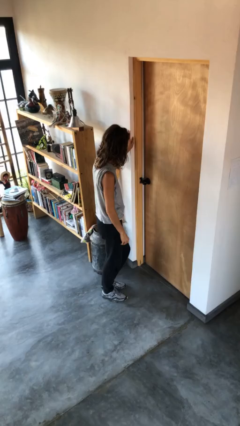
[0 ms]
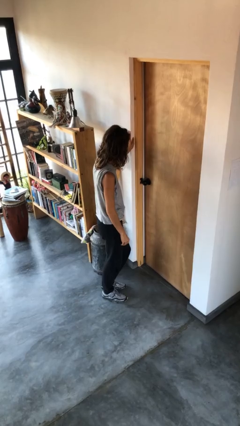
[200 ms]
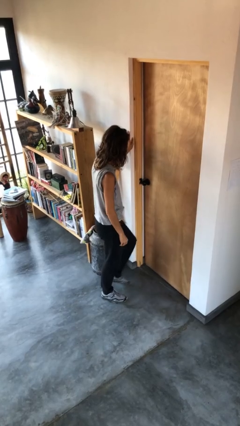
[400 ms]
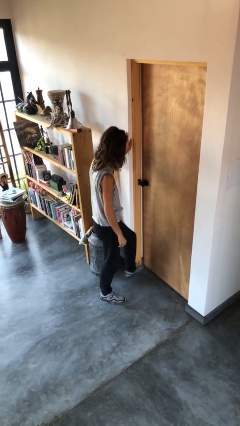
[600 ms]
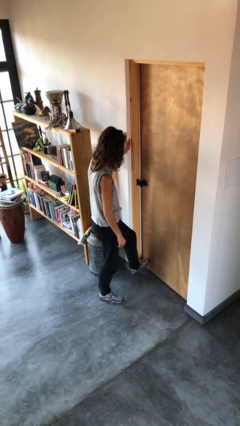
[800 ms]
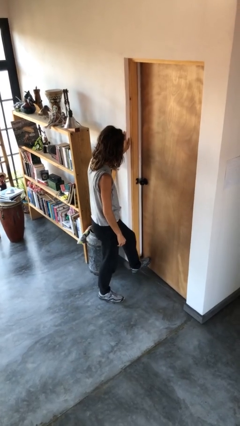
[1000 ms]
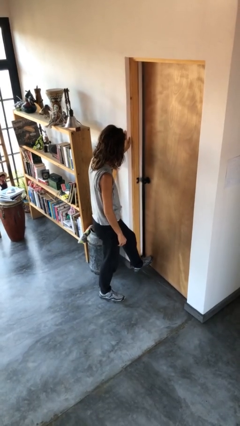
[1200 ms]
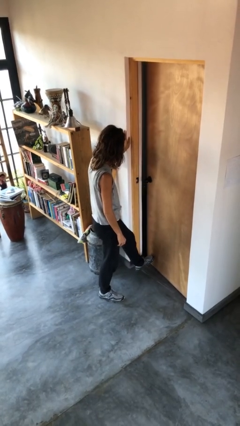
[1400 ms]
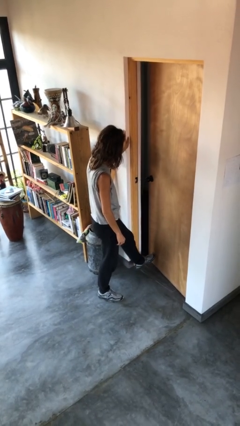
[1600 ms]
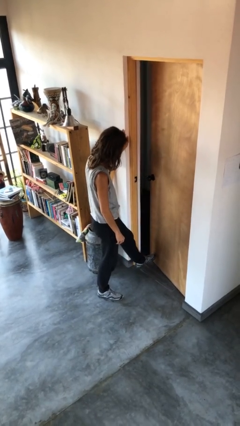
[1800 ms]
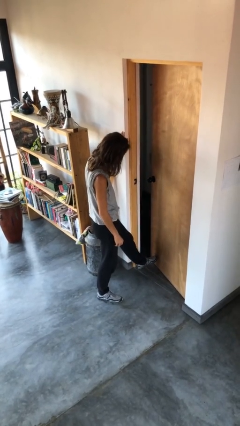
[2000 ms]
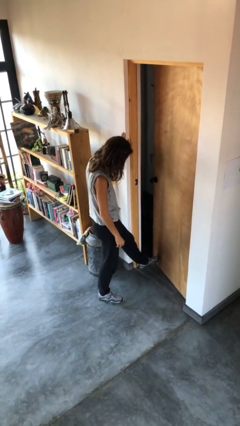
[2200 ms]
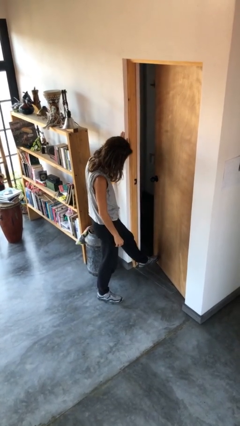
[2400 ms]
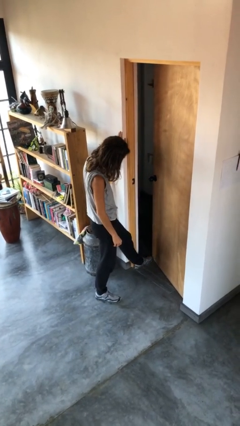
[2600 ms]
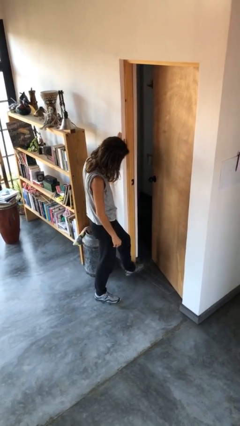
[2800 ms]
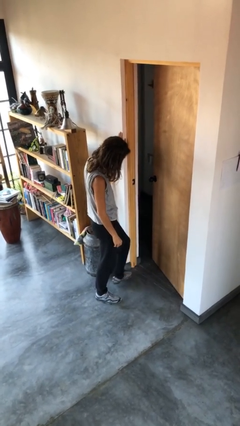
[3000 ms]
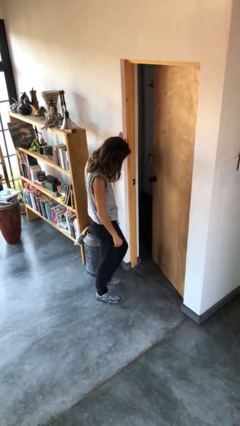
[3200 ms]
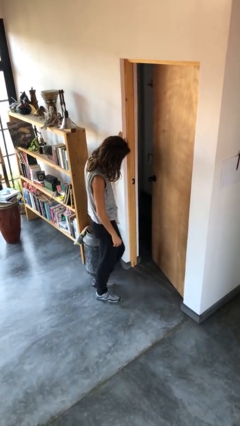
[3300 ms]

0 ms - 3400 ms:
person opens facility door

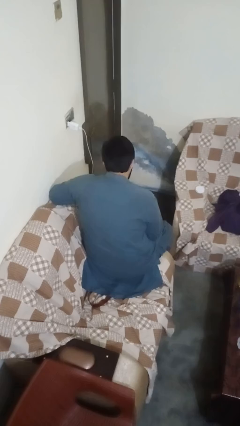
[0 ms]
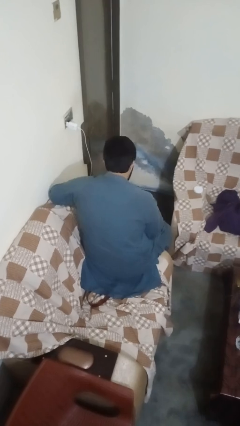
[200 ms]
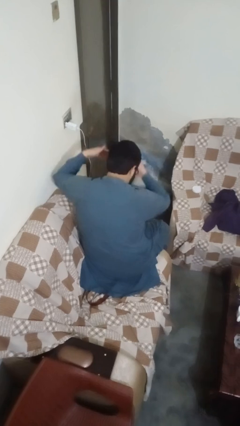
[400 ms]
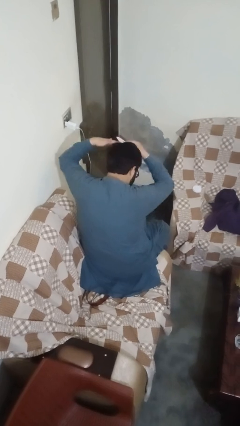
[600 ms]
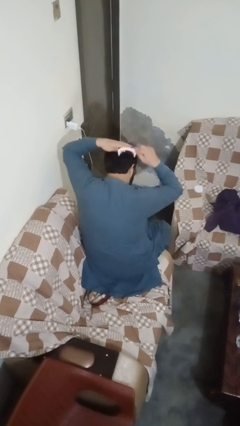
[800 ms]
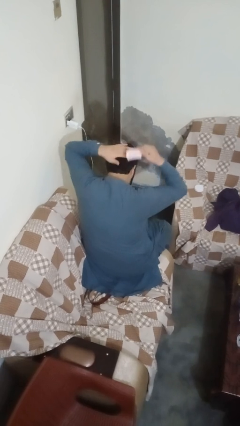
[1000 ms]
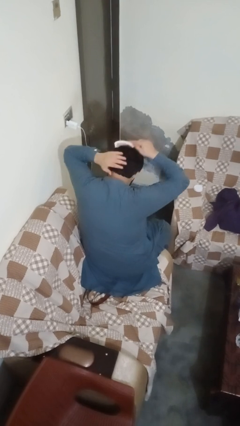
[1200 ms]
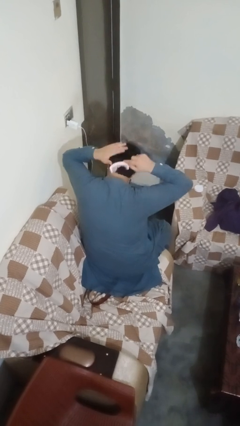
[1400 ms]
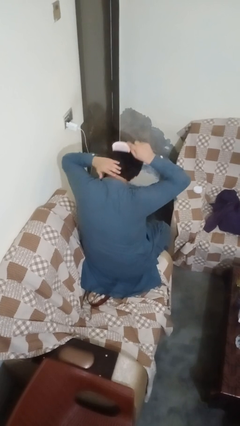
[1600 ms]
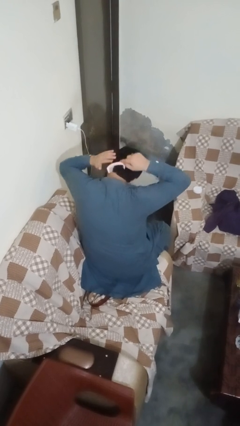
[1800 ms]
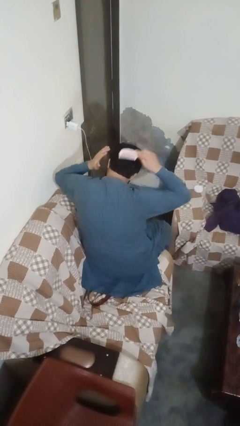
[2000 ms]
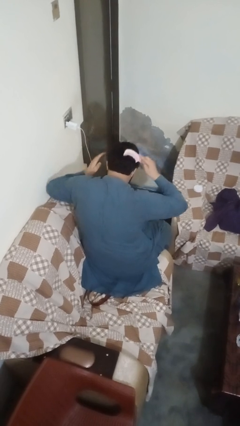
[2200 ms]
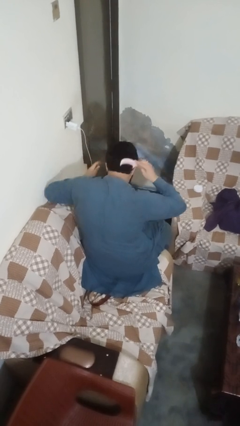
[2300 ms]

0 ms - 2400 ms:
person brushes hair

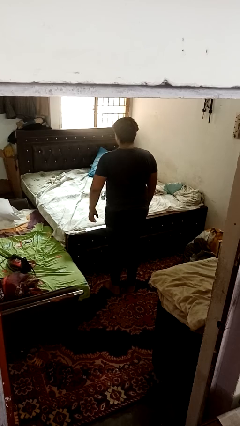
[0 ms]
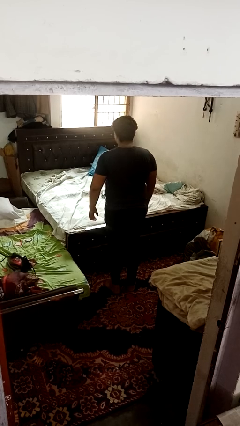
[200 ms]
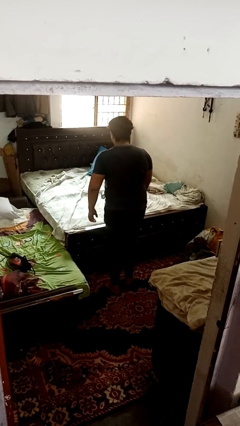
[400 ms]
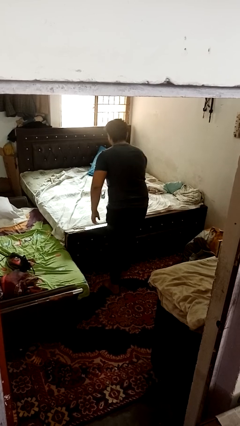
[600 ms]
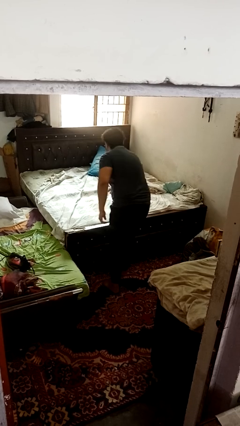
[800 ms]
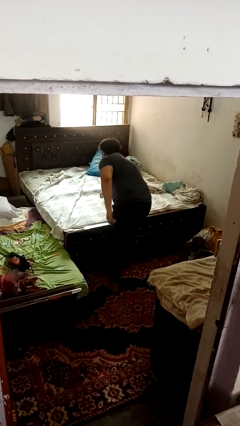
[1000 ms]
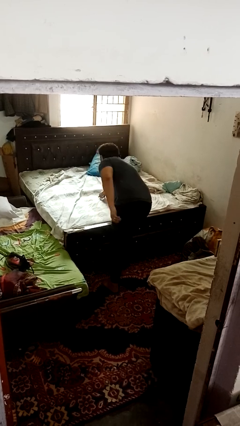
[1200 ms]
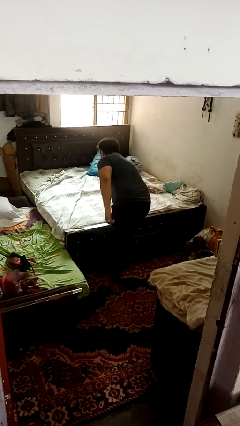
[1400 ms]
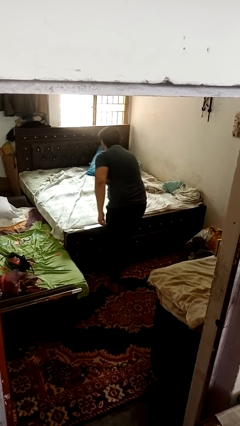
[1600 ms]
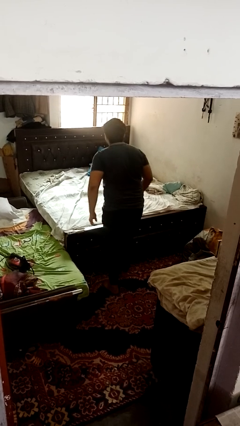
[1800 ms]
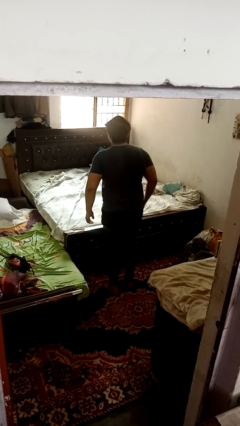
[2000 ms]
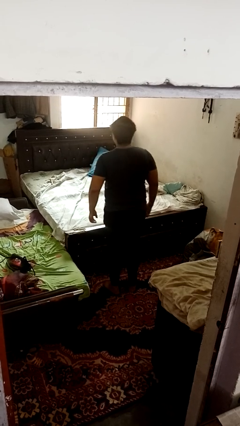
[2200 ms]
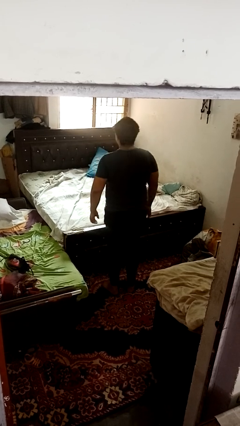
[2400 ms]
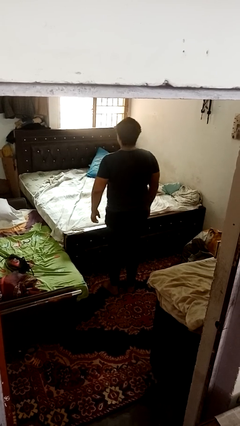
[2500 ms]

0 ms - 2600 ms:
person picks up object from bed

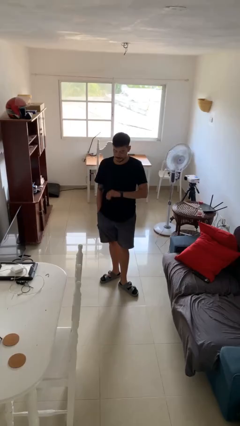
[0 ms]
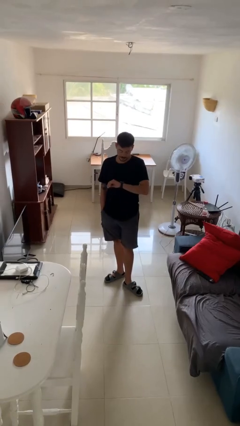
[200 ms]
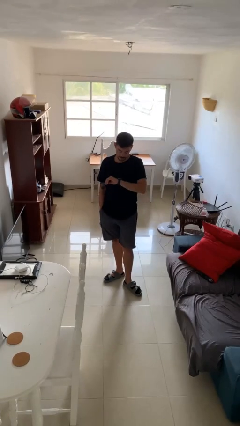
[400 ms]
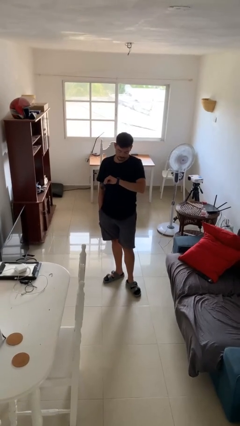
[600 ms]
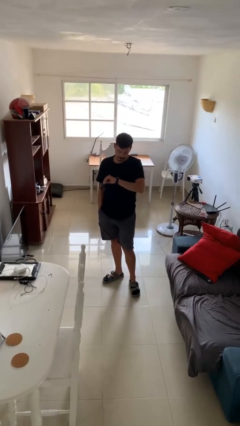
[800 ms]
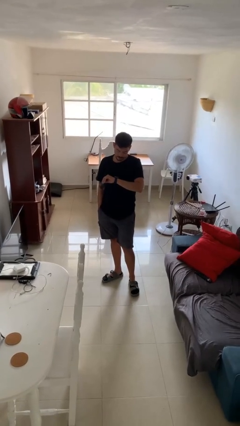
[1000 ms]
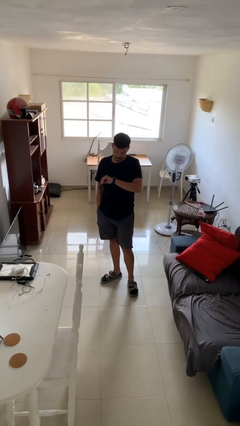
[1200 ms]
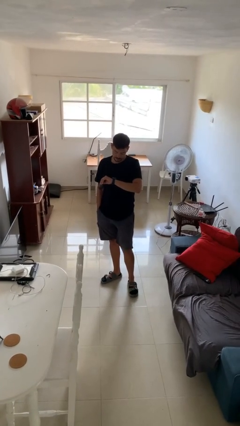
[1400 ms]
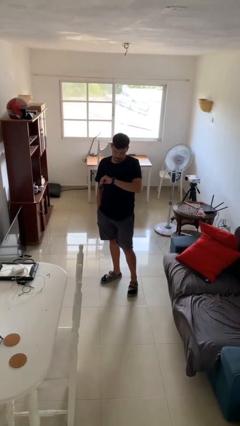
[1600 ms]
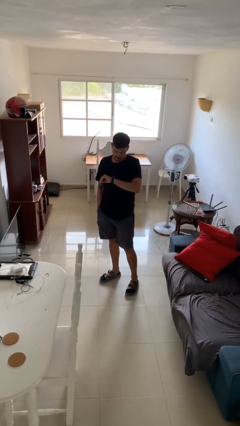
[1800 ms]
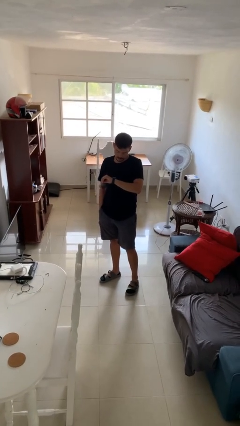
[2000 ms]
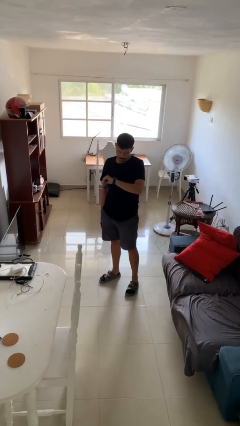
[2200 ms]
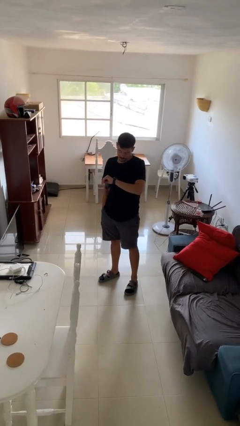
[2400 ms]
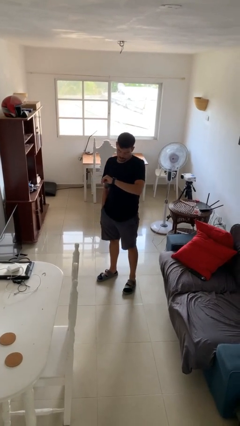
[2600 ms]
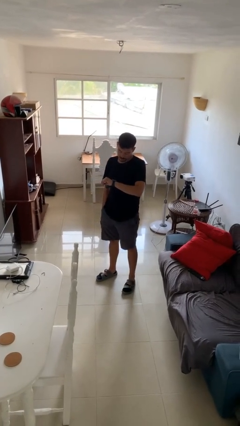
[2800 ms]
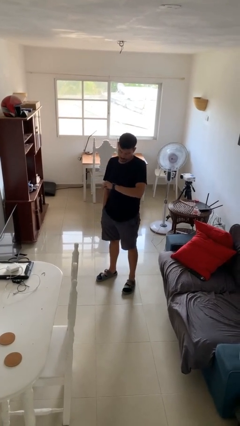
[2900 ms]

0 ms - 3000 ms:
person looks at wristwatch

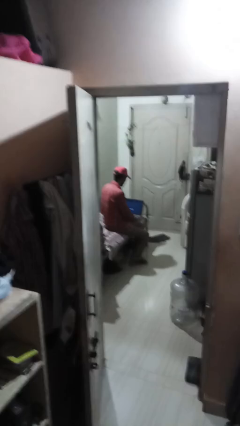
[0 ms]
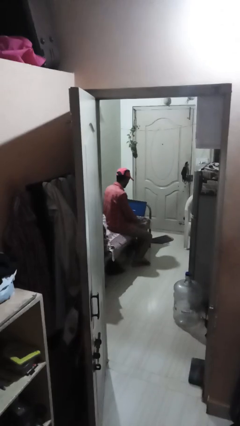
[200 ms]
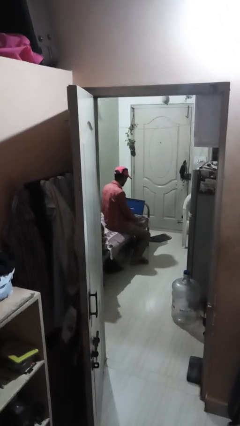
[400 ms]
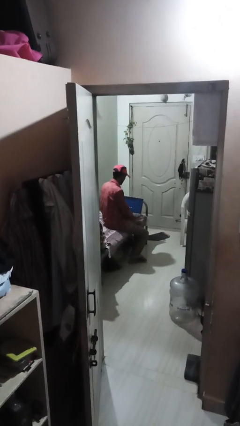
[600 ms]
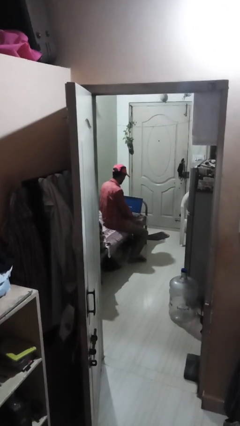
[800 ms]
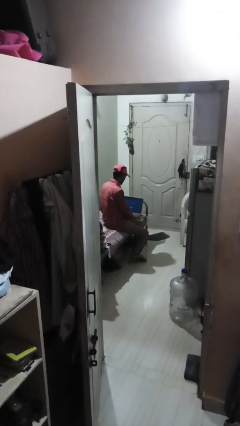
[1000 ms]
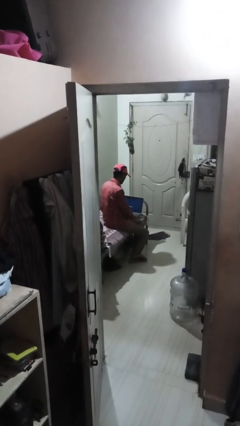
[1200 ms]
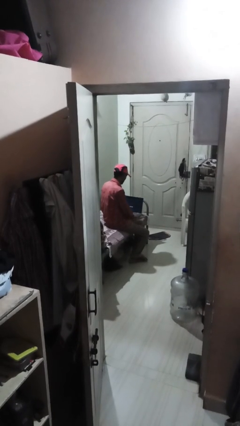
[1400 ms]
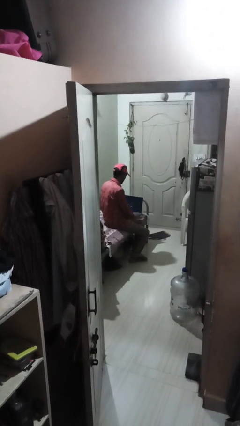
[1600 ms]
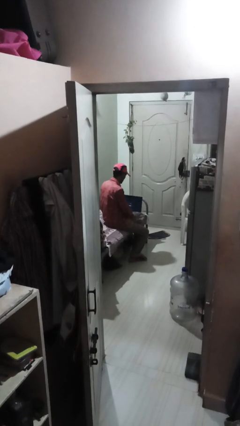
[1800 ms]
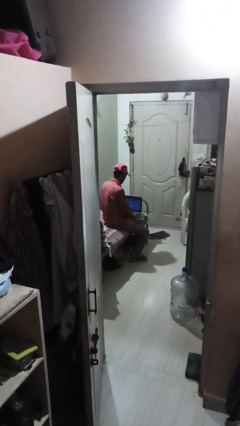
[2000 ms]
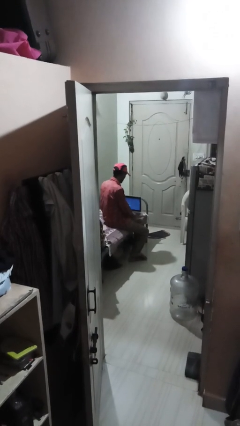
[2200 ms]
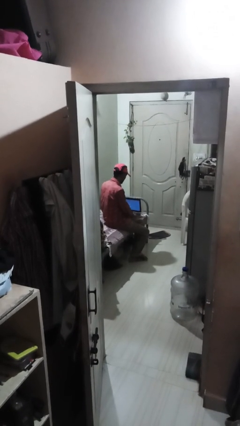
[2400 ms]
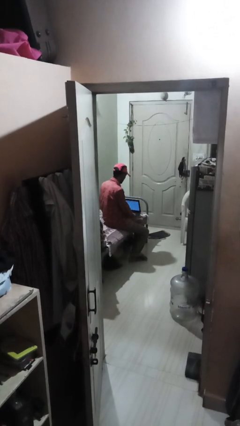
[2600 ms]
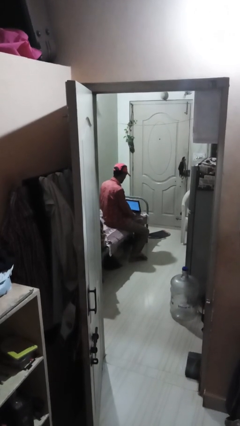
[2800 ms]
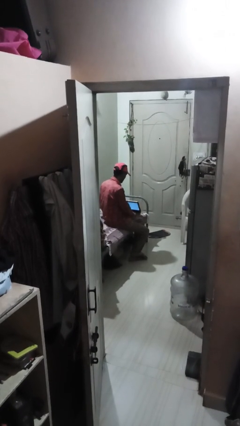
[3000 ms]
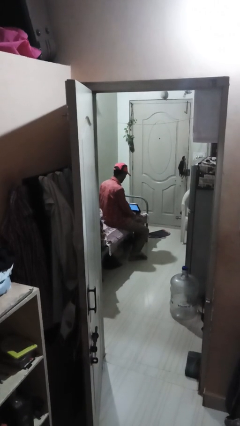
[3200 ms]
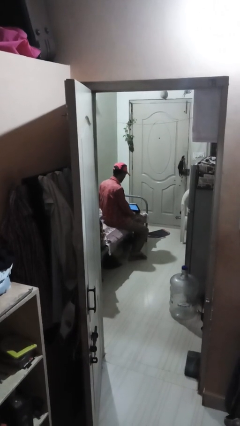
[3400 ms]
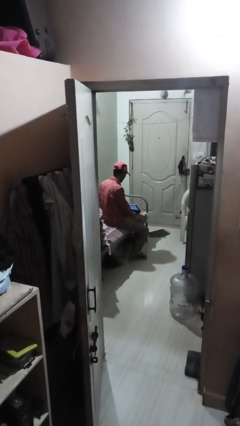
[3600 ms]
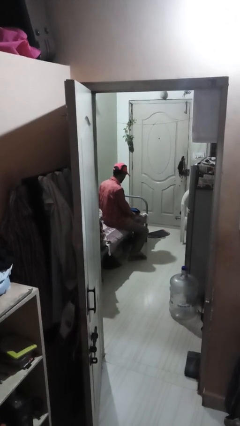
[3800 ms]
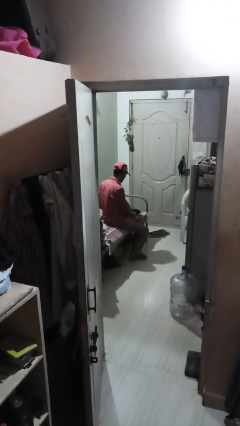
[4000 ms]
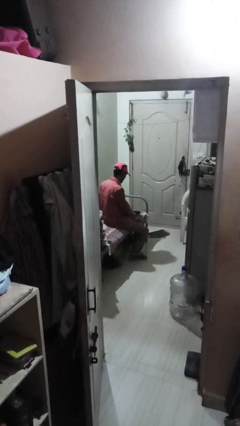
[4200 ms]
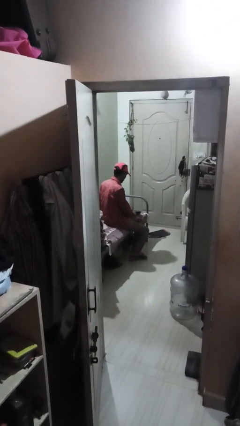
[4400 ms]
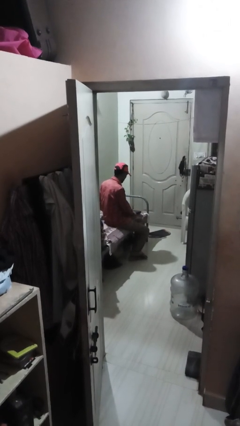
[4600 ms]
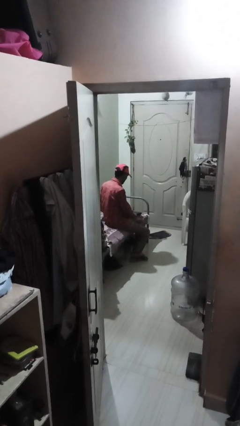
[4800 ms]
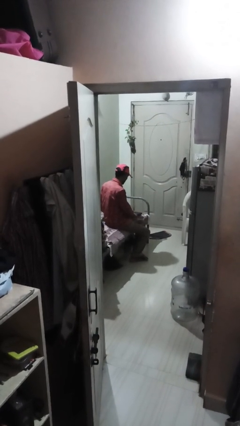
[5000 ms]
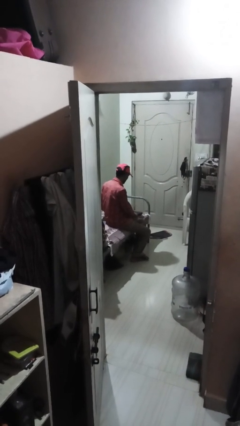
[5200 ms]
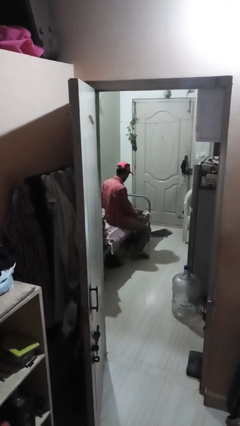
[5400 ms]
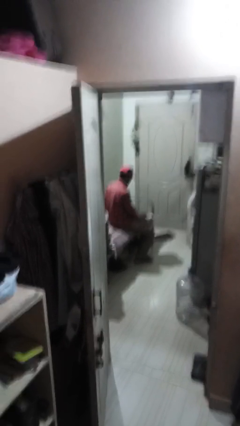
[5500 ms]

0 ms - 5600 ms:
person closes laptop
